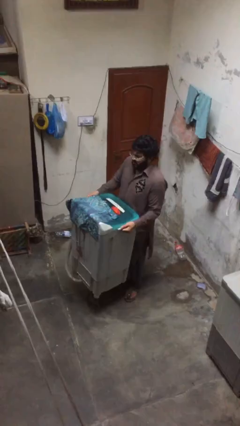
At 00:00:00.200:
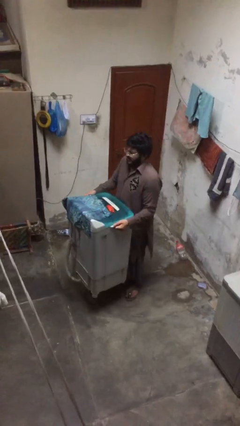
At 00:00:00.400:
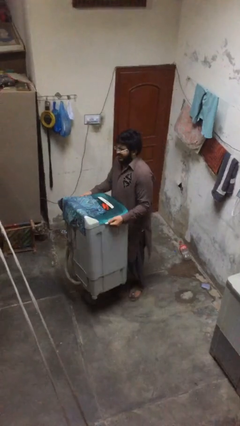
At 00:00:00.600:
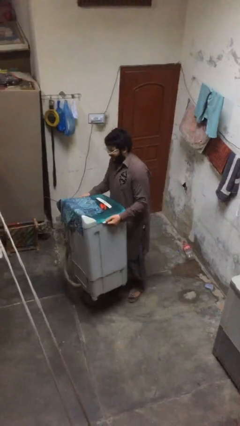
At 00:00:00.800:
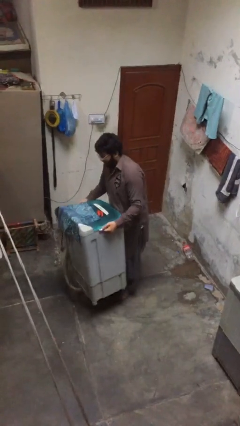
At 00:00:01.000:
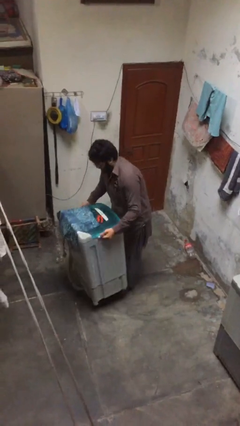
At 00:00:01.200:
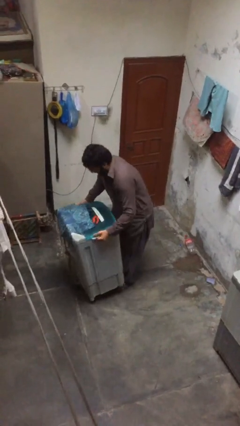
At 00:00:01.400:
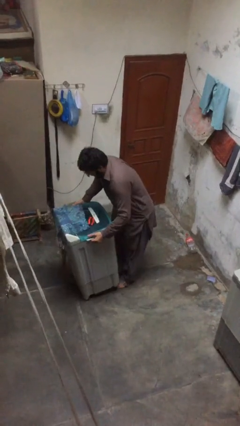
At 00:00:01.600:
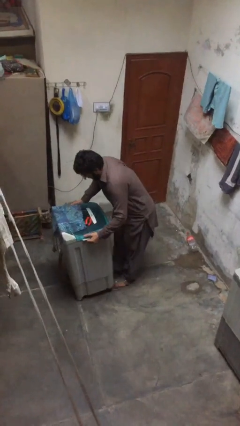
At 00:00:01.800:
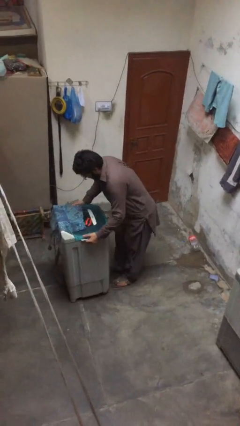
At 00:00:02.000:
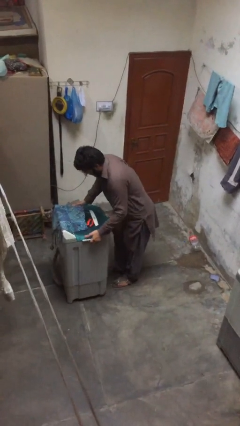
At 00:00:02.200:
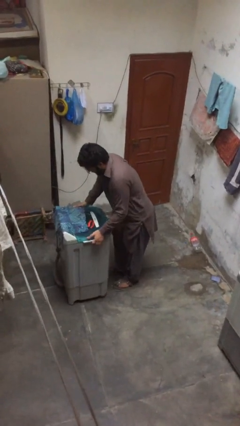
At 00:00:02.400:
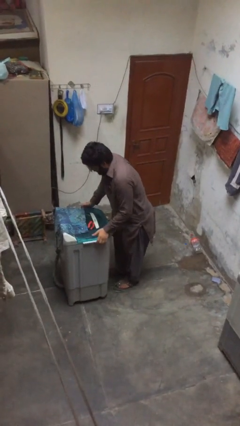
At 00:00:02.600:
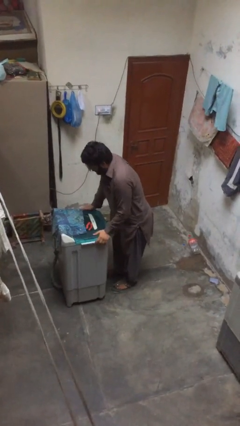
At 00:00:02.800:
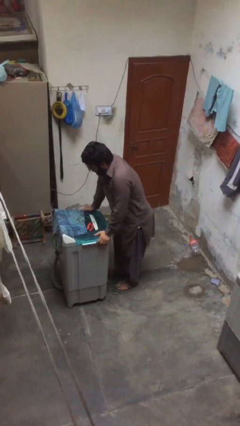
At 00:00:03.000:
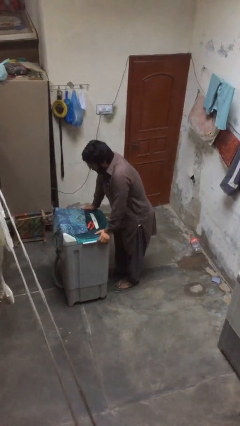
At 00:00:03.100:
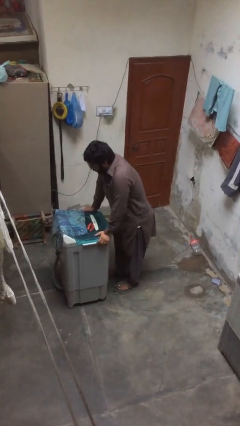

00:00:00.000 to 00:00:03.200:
person puts down object on floor

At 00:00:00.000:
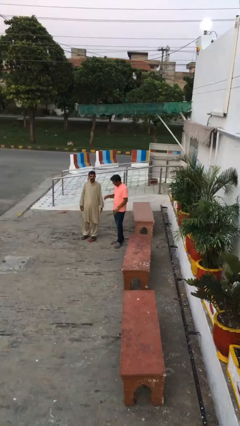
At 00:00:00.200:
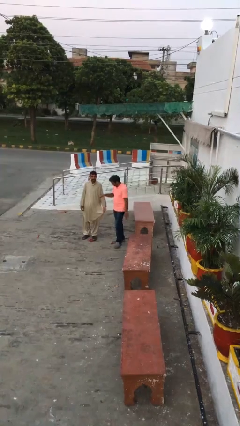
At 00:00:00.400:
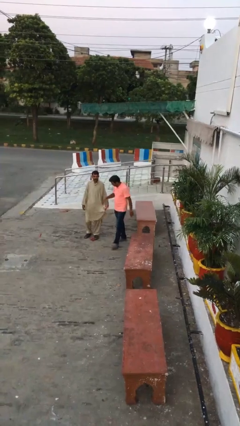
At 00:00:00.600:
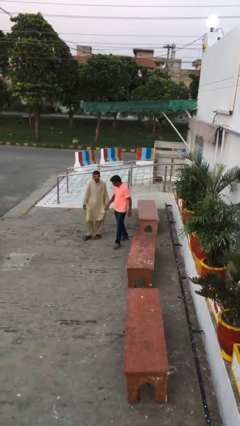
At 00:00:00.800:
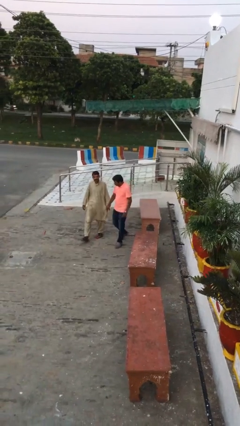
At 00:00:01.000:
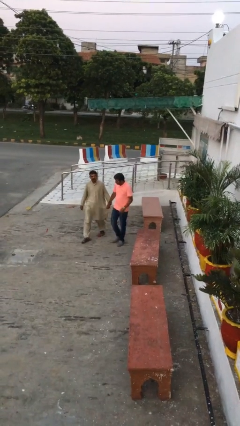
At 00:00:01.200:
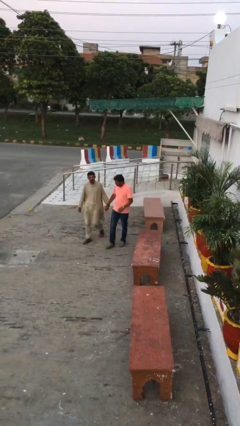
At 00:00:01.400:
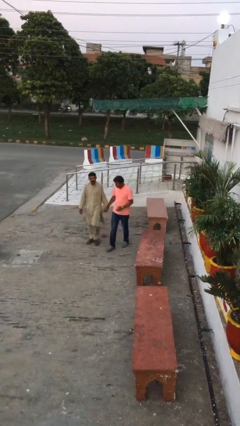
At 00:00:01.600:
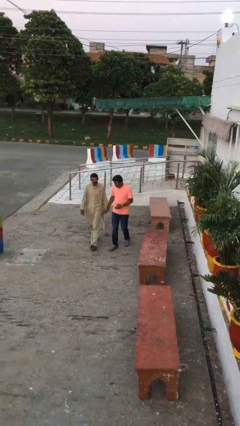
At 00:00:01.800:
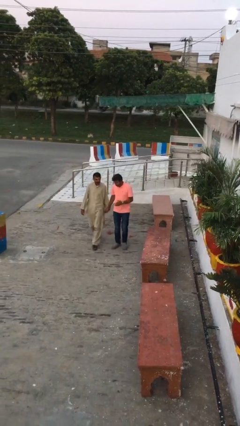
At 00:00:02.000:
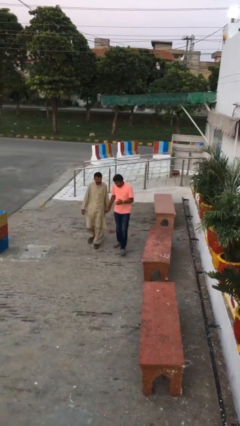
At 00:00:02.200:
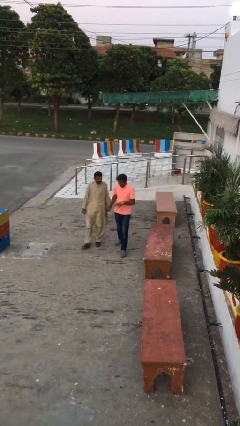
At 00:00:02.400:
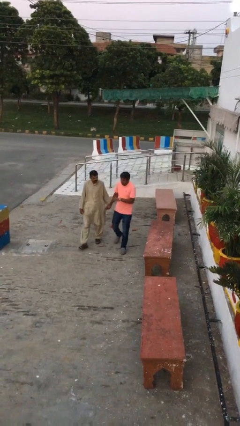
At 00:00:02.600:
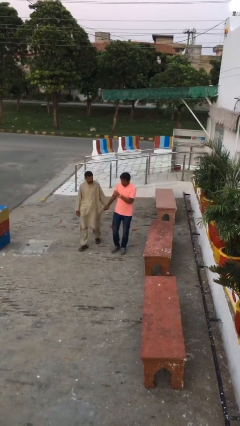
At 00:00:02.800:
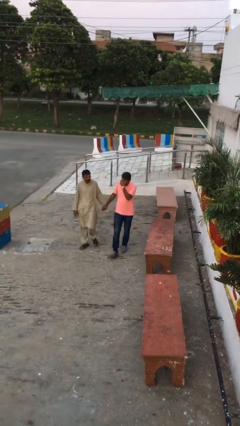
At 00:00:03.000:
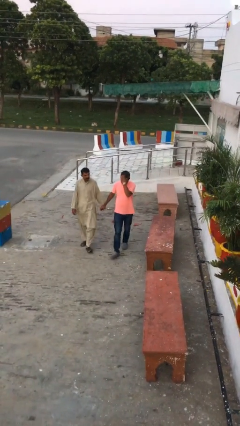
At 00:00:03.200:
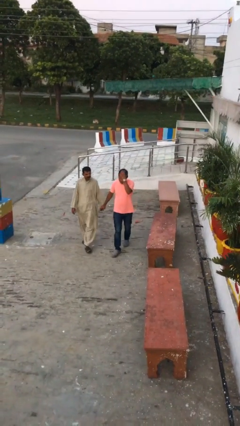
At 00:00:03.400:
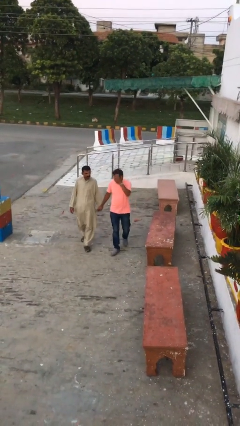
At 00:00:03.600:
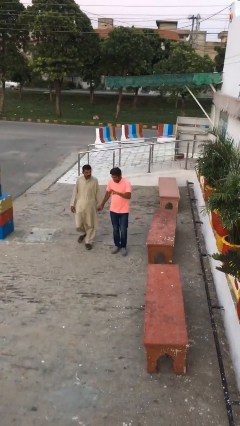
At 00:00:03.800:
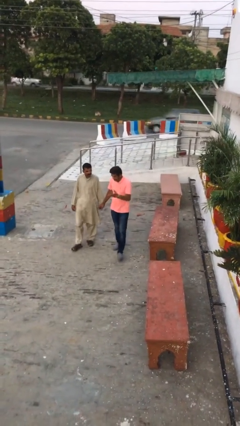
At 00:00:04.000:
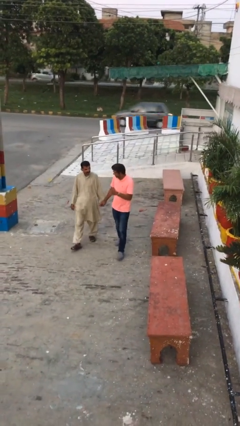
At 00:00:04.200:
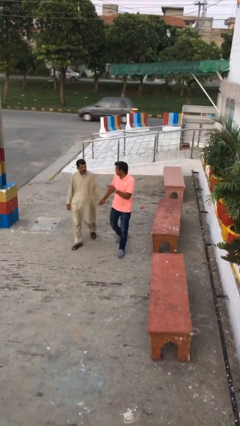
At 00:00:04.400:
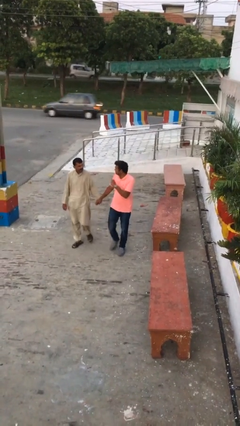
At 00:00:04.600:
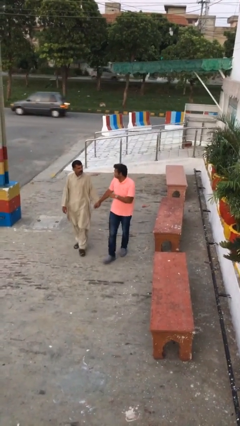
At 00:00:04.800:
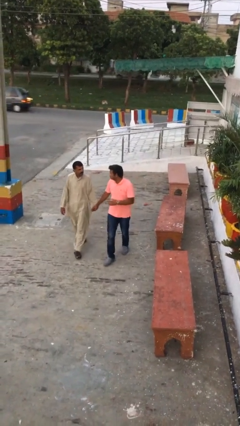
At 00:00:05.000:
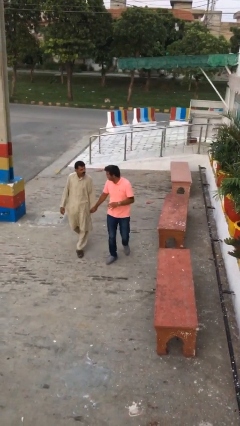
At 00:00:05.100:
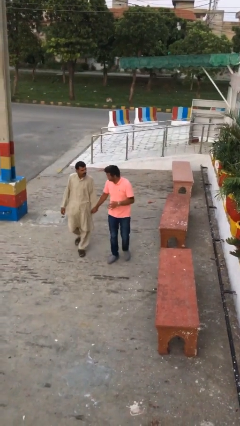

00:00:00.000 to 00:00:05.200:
person holds hand

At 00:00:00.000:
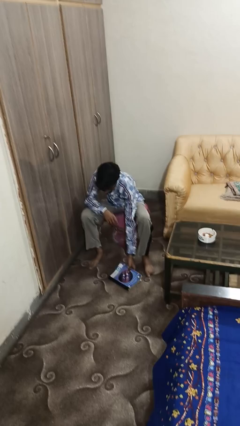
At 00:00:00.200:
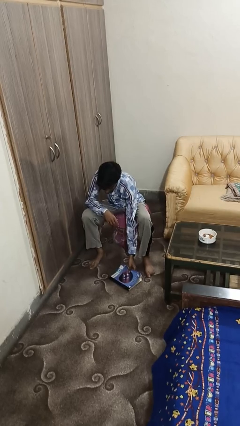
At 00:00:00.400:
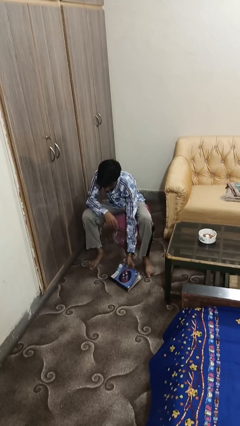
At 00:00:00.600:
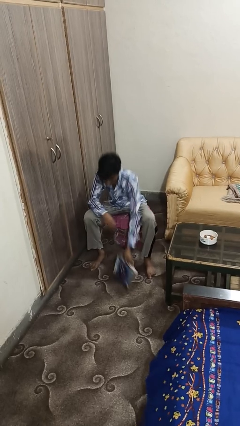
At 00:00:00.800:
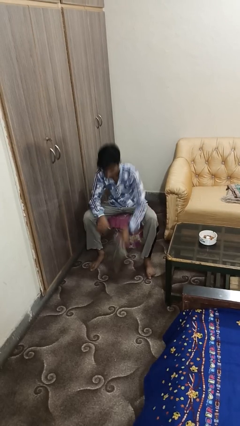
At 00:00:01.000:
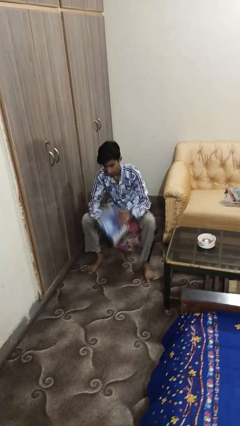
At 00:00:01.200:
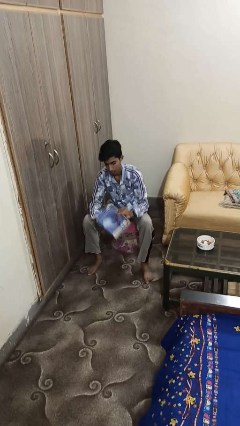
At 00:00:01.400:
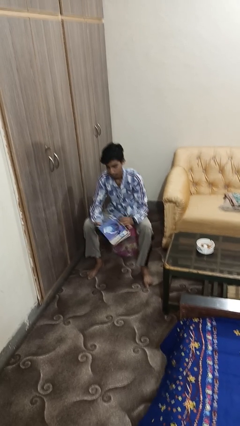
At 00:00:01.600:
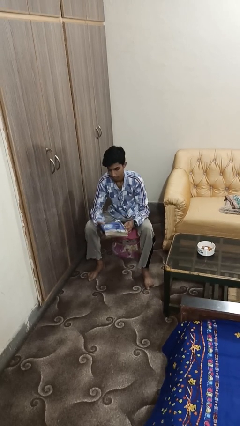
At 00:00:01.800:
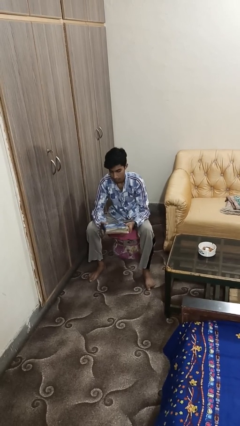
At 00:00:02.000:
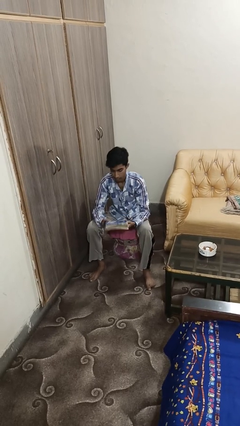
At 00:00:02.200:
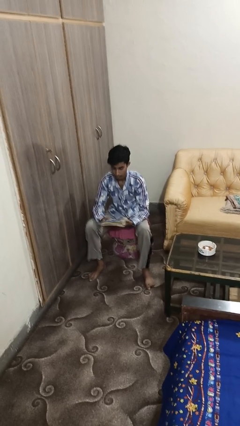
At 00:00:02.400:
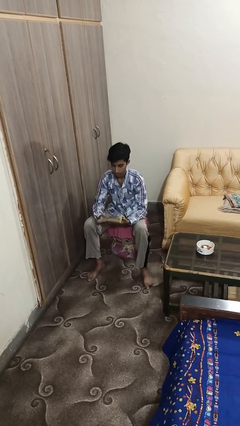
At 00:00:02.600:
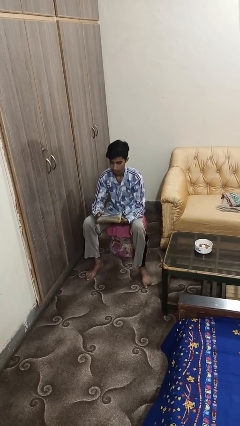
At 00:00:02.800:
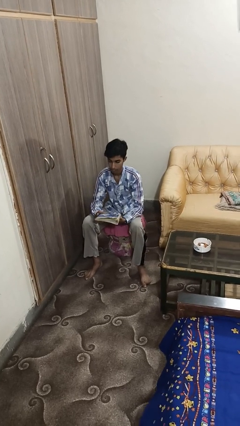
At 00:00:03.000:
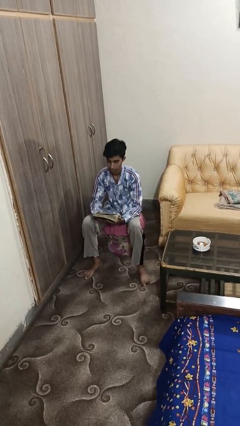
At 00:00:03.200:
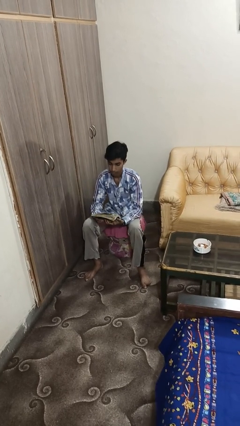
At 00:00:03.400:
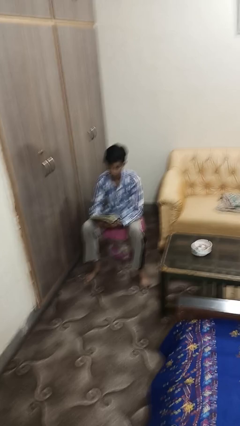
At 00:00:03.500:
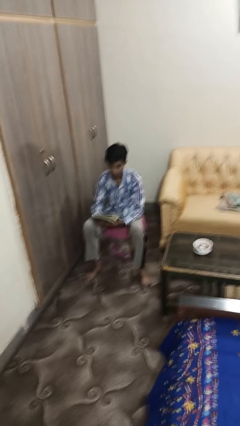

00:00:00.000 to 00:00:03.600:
person picks up object from floor

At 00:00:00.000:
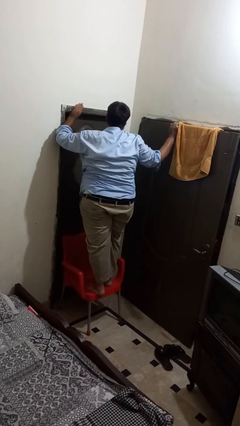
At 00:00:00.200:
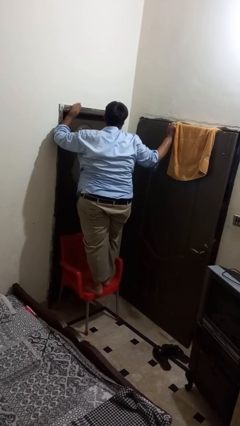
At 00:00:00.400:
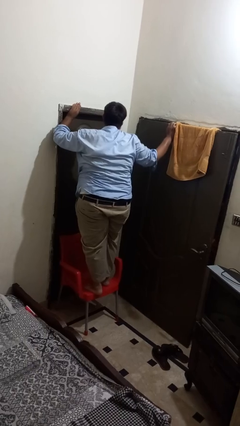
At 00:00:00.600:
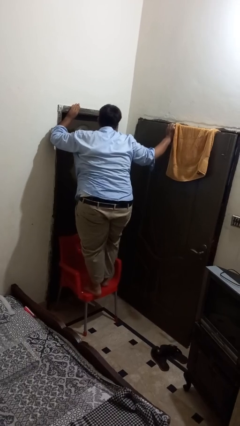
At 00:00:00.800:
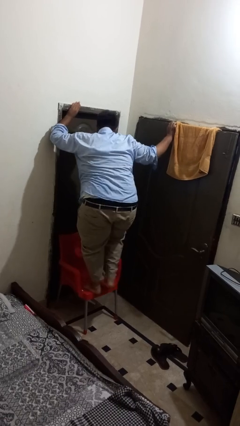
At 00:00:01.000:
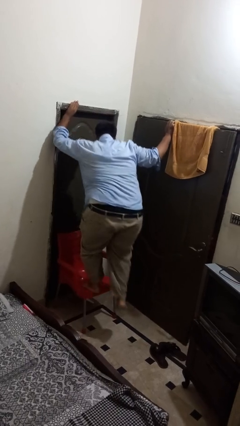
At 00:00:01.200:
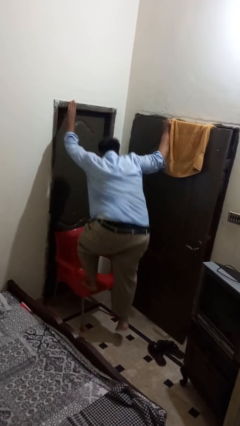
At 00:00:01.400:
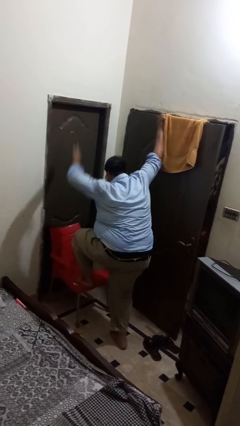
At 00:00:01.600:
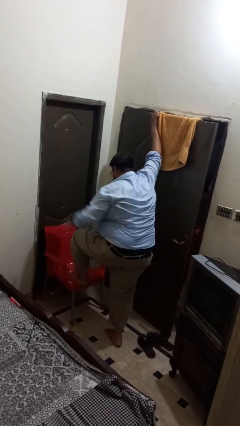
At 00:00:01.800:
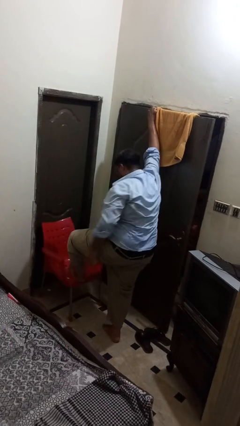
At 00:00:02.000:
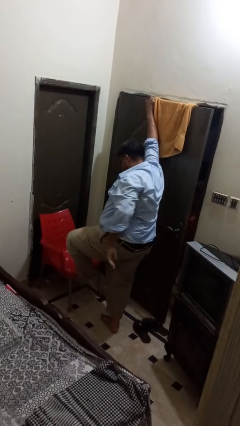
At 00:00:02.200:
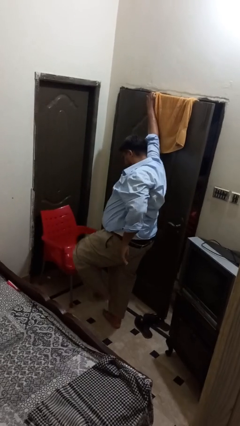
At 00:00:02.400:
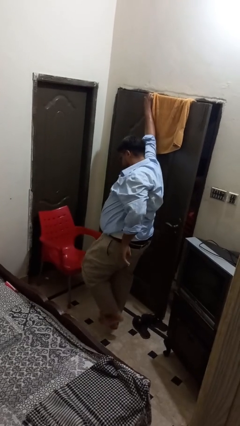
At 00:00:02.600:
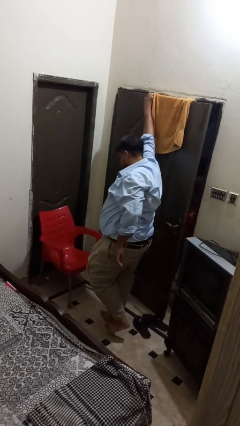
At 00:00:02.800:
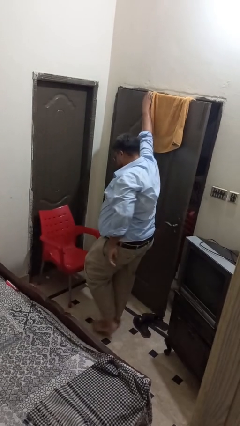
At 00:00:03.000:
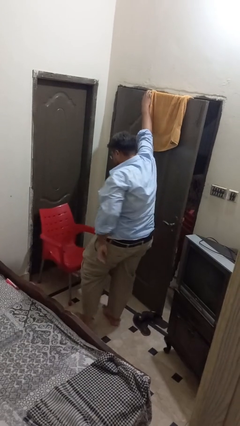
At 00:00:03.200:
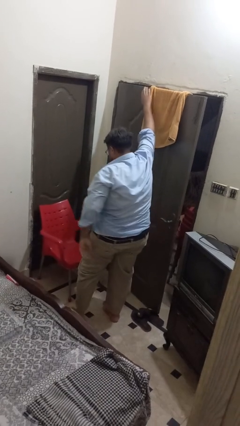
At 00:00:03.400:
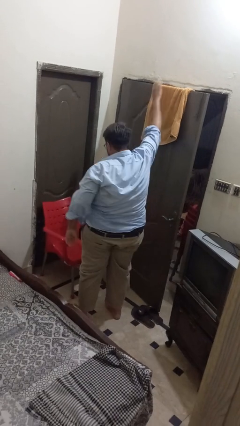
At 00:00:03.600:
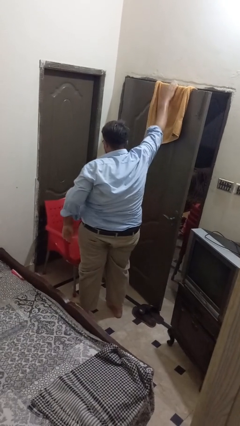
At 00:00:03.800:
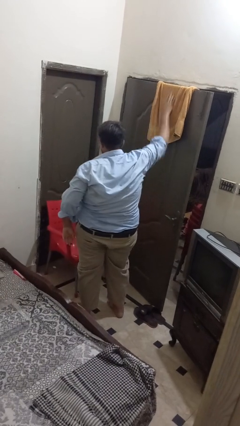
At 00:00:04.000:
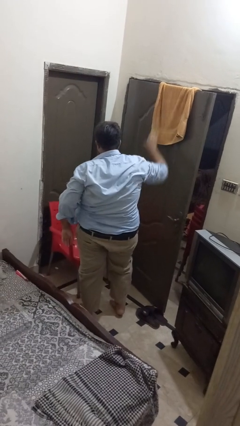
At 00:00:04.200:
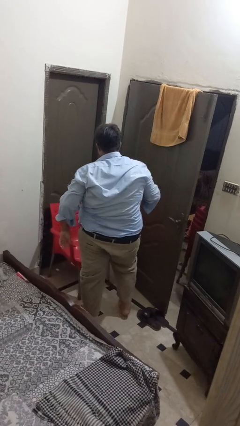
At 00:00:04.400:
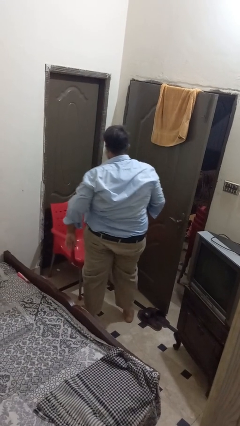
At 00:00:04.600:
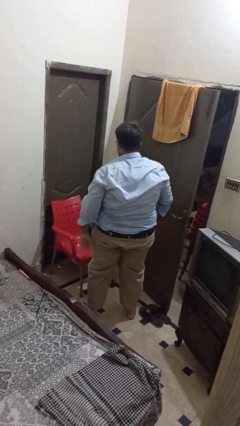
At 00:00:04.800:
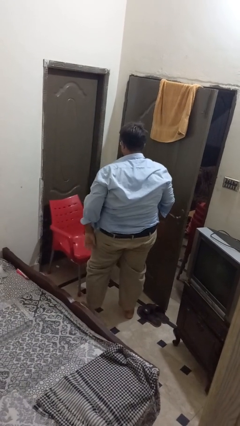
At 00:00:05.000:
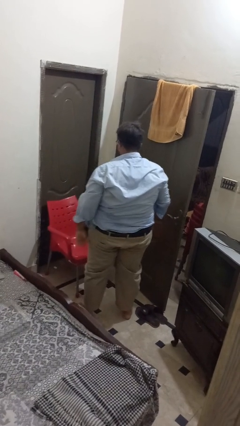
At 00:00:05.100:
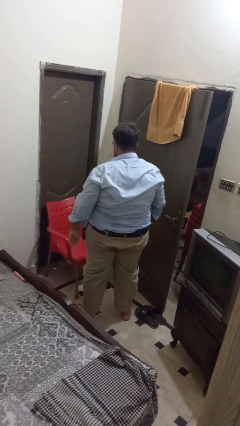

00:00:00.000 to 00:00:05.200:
person climbs off chair
